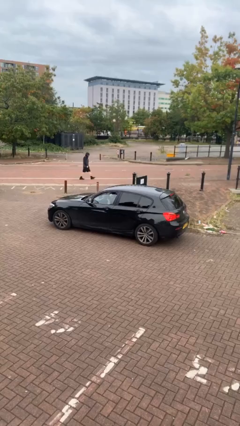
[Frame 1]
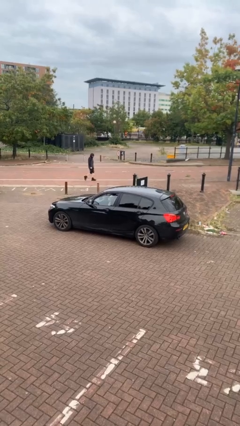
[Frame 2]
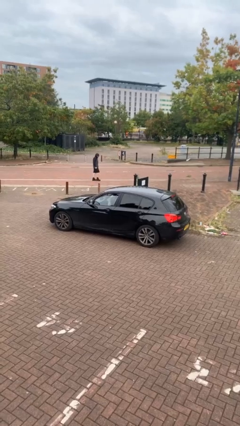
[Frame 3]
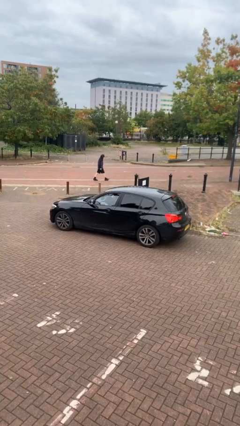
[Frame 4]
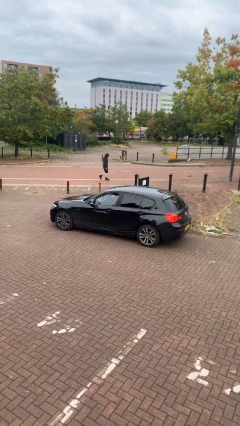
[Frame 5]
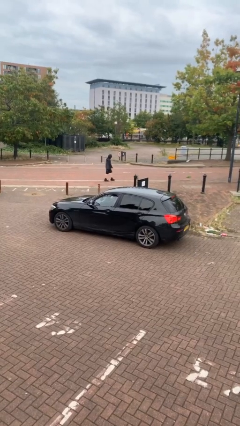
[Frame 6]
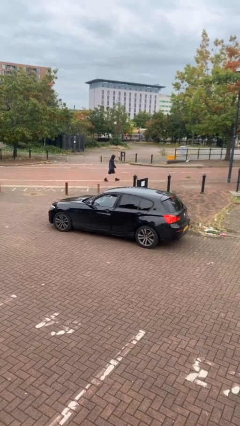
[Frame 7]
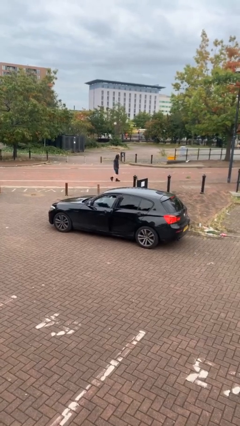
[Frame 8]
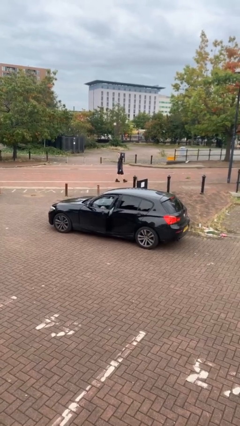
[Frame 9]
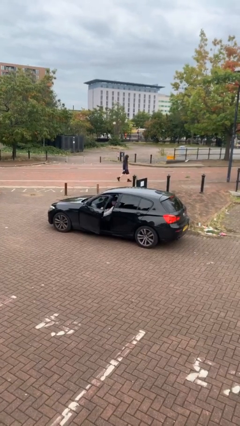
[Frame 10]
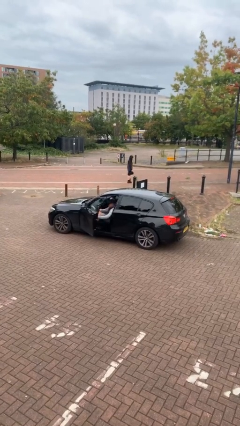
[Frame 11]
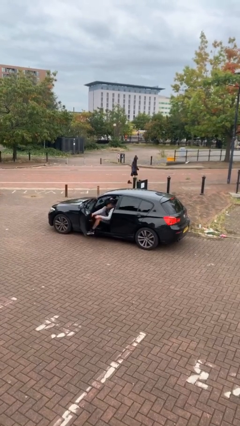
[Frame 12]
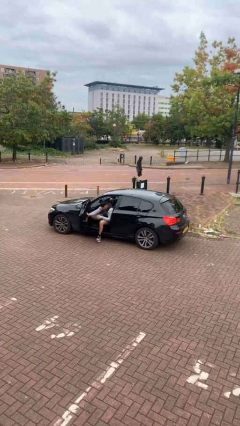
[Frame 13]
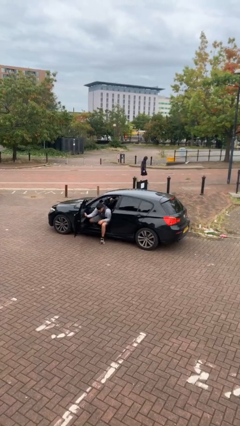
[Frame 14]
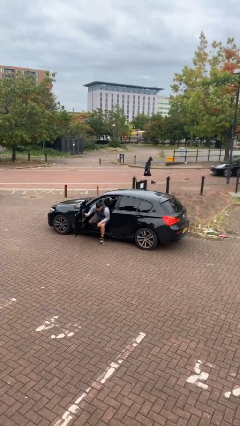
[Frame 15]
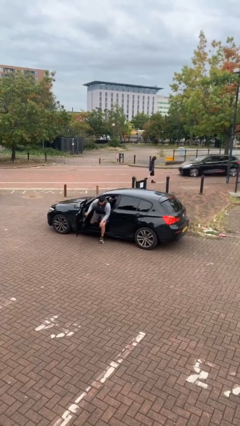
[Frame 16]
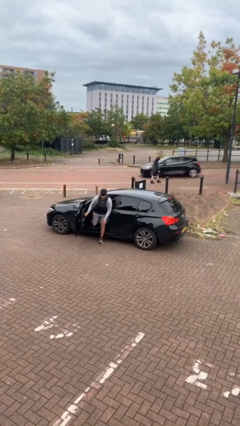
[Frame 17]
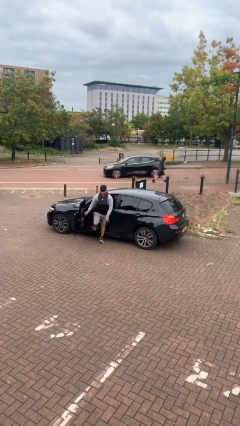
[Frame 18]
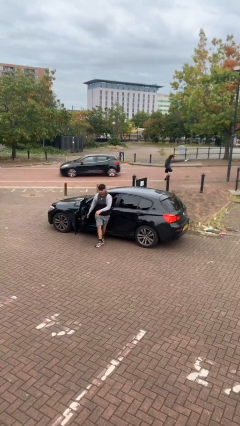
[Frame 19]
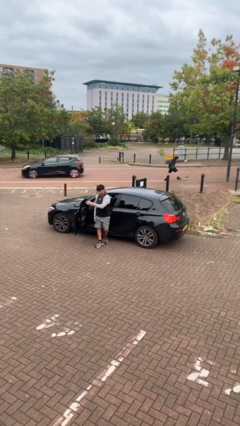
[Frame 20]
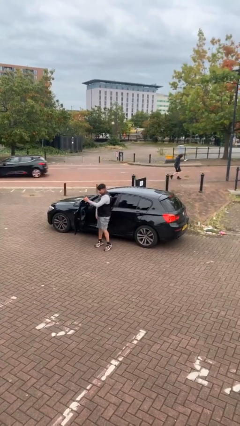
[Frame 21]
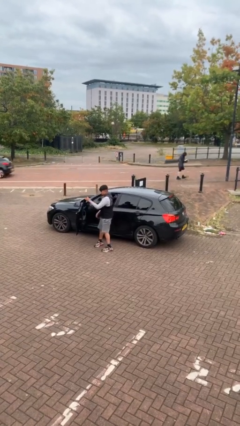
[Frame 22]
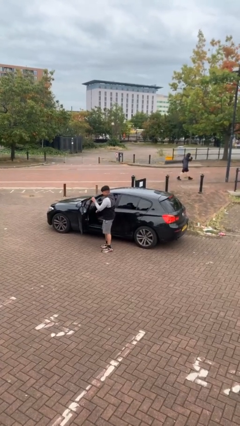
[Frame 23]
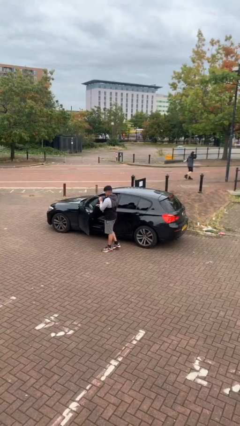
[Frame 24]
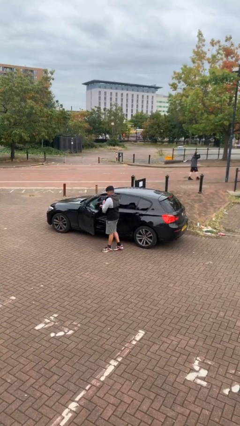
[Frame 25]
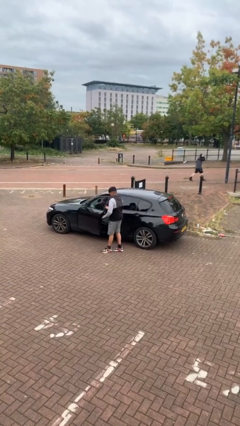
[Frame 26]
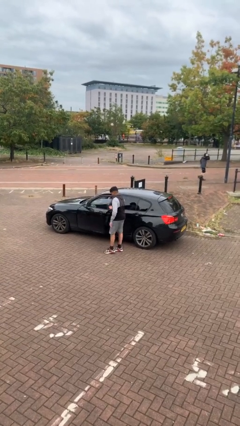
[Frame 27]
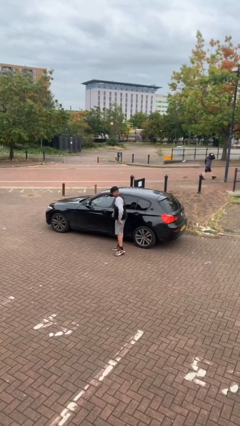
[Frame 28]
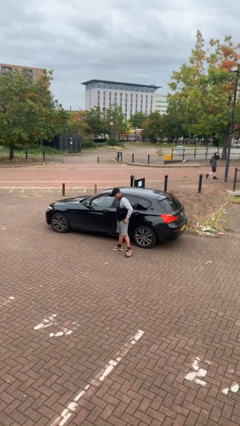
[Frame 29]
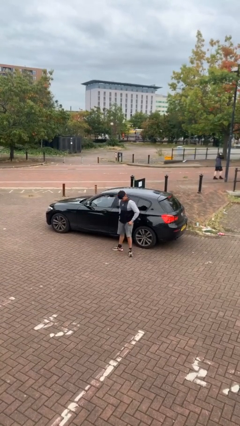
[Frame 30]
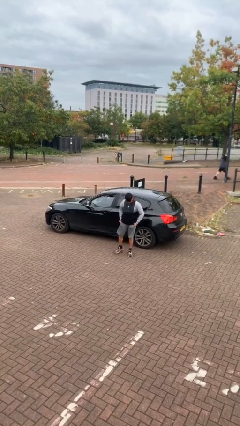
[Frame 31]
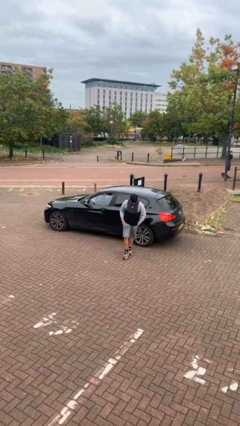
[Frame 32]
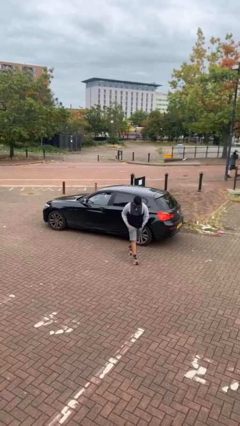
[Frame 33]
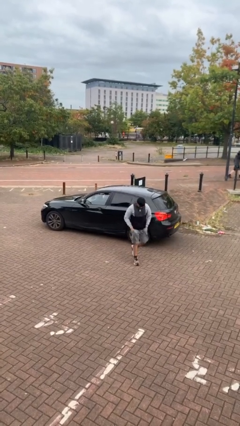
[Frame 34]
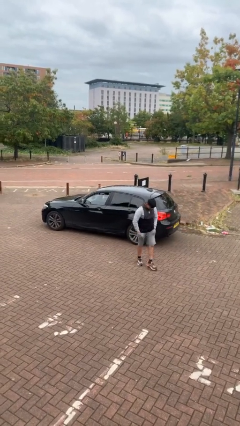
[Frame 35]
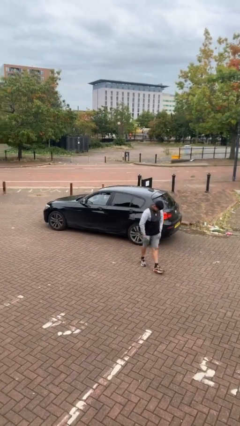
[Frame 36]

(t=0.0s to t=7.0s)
car drops off person

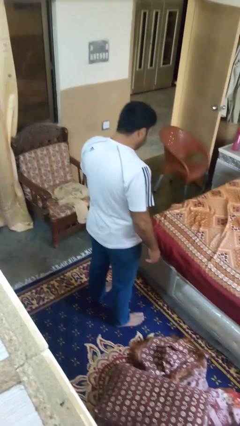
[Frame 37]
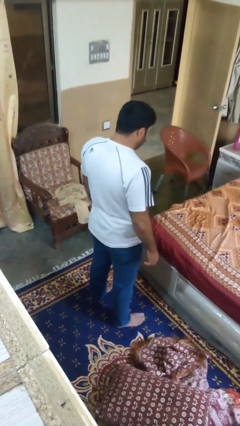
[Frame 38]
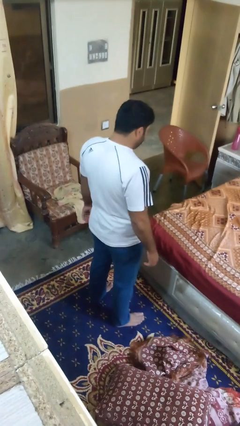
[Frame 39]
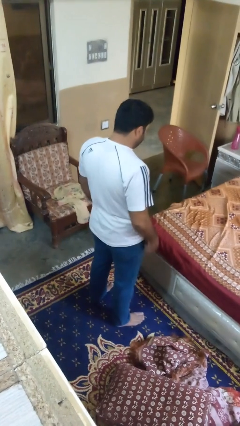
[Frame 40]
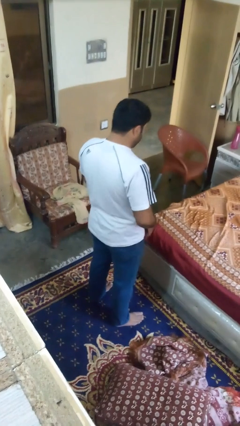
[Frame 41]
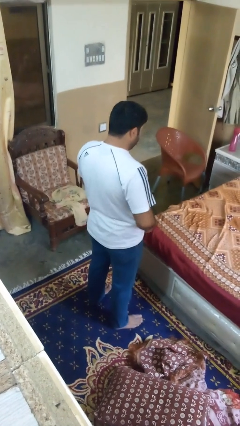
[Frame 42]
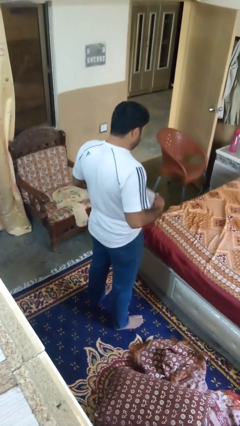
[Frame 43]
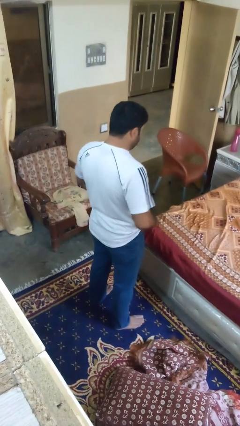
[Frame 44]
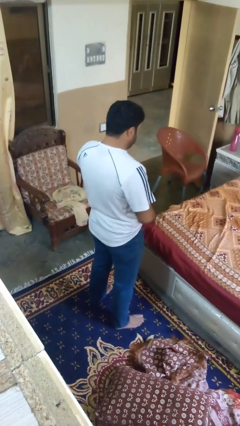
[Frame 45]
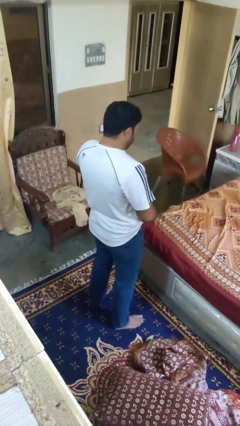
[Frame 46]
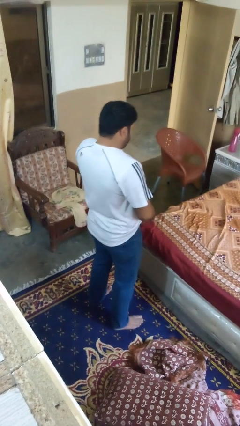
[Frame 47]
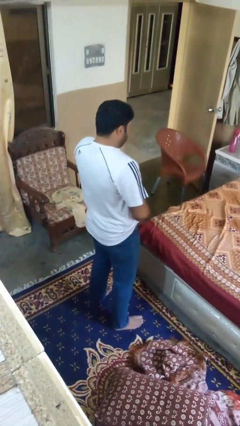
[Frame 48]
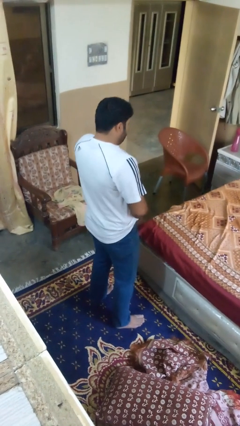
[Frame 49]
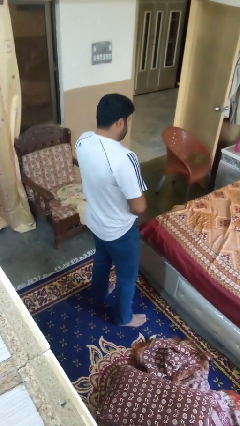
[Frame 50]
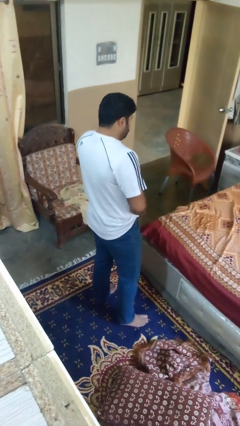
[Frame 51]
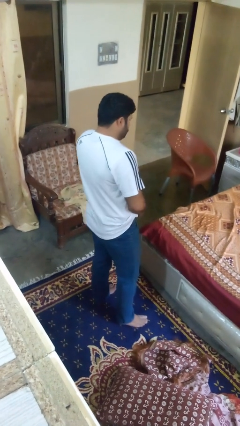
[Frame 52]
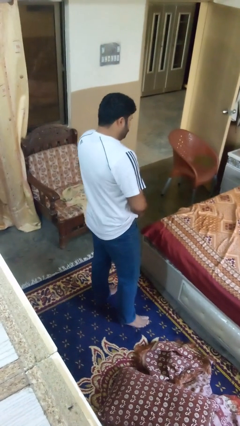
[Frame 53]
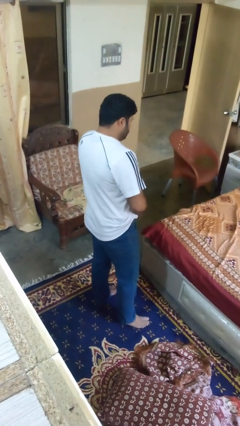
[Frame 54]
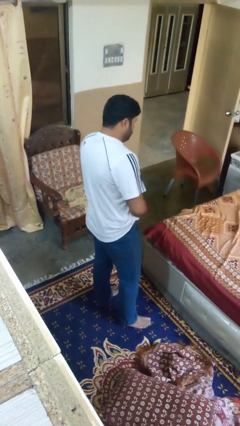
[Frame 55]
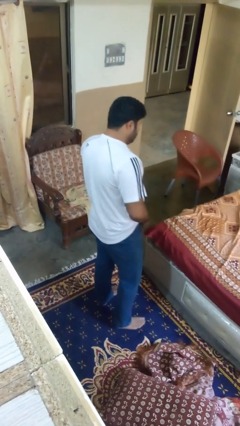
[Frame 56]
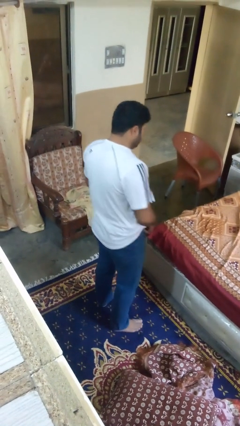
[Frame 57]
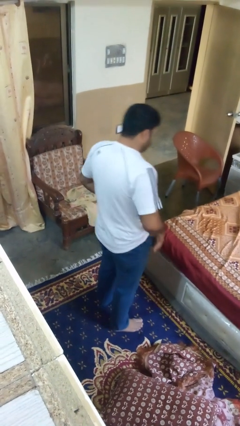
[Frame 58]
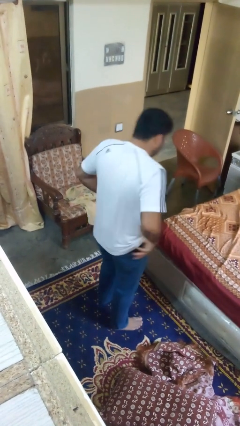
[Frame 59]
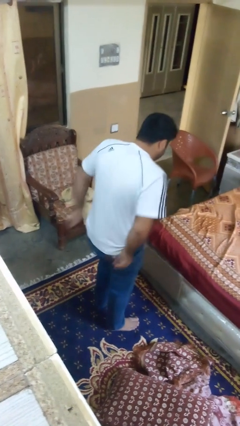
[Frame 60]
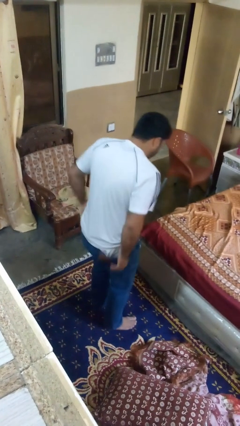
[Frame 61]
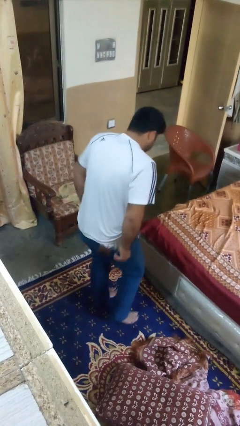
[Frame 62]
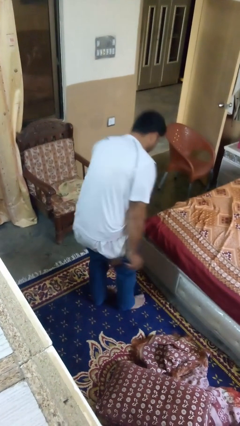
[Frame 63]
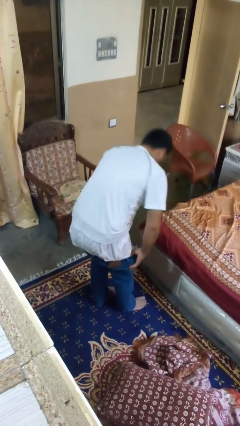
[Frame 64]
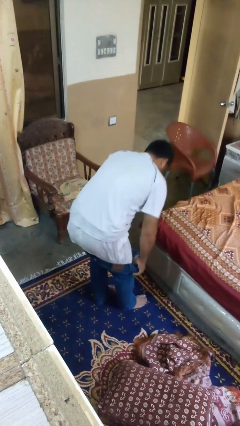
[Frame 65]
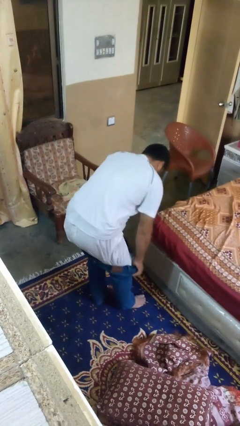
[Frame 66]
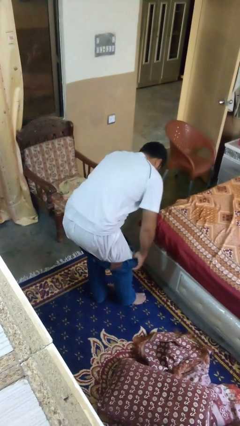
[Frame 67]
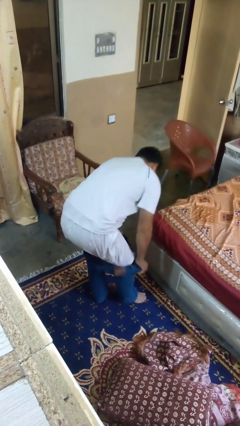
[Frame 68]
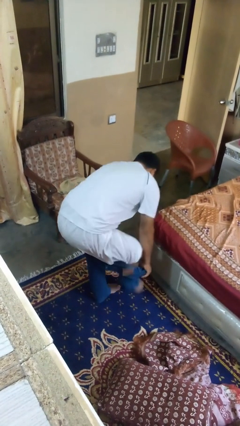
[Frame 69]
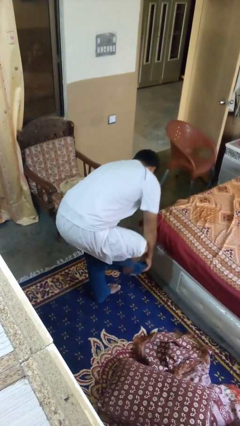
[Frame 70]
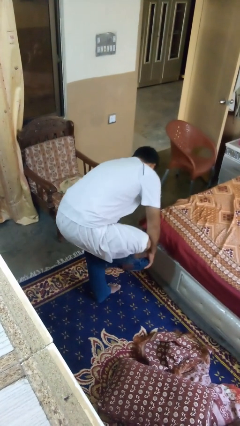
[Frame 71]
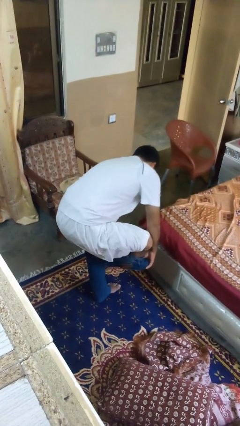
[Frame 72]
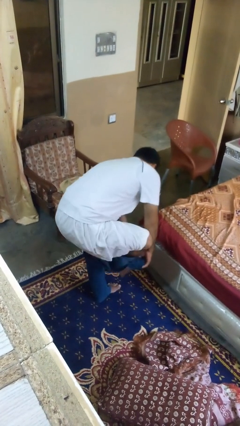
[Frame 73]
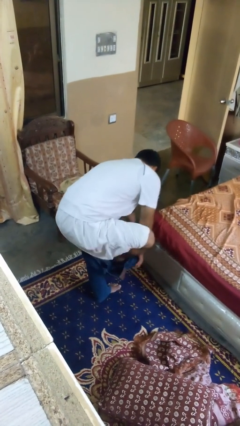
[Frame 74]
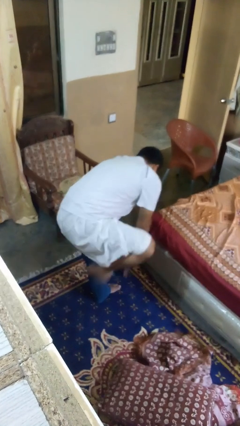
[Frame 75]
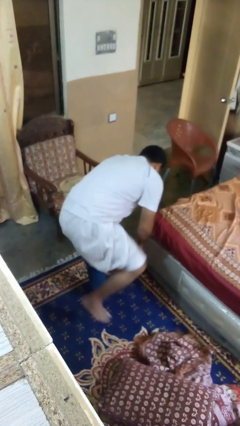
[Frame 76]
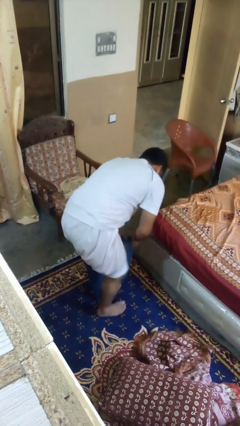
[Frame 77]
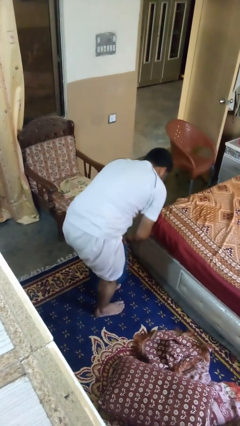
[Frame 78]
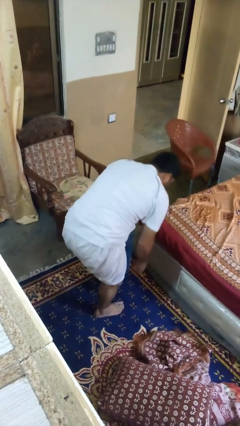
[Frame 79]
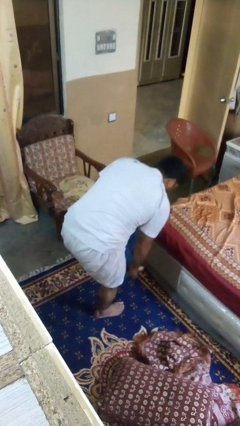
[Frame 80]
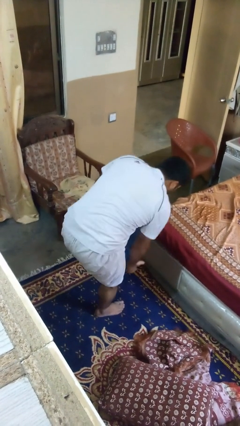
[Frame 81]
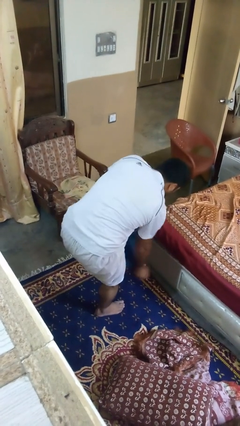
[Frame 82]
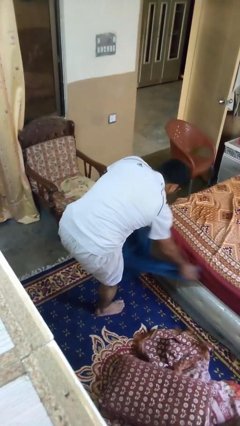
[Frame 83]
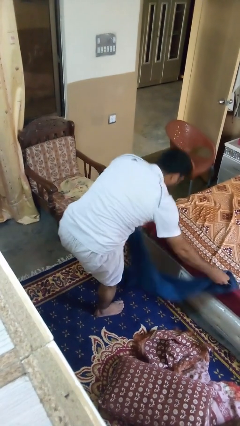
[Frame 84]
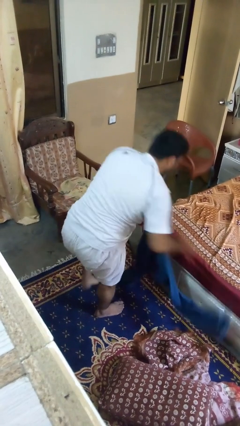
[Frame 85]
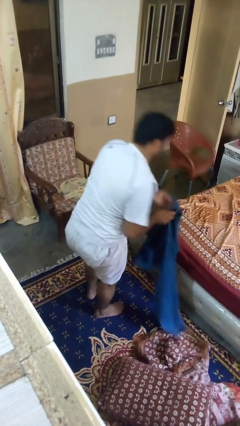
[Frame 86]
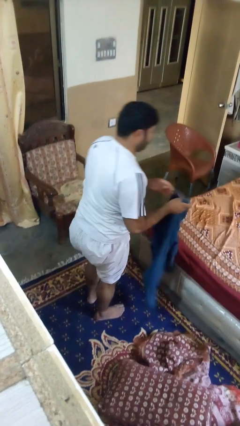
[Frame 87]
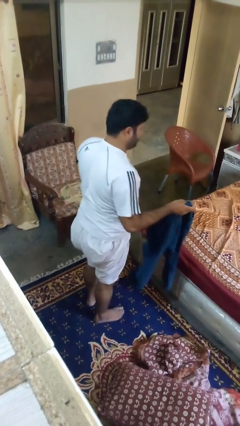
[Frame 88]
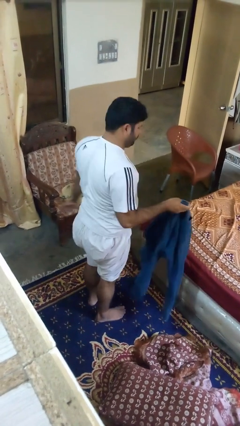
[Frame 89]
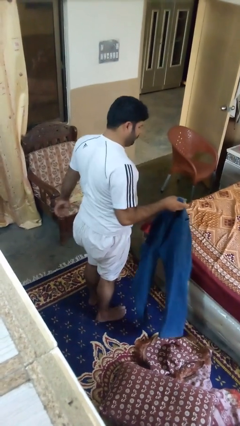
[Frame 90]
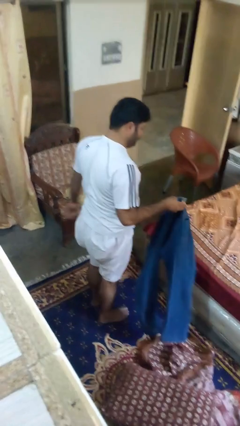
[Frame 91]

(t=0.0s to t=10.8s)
person takes off pants

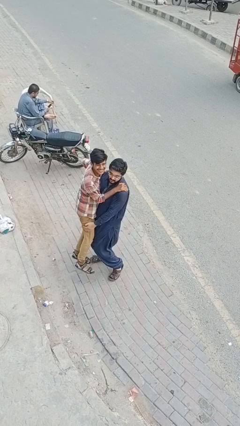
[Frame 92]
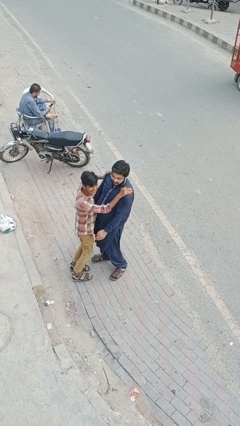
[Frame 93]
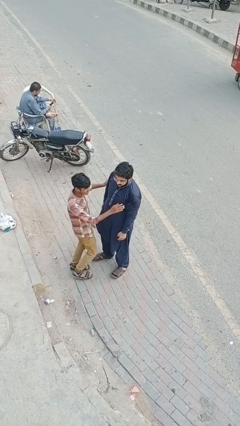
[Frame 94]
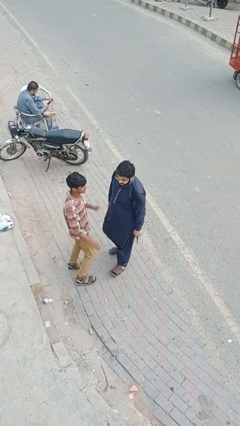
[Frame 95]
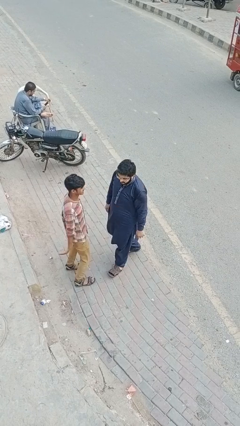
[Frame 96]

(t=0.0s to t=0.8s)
person puts down person
